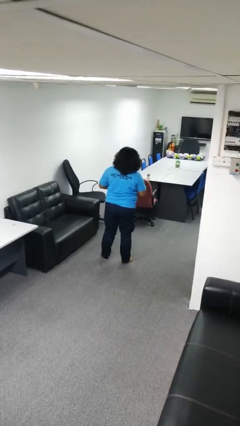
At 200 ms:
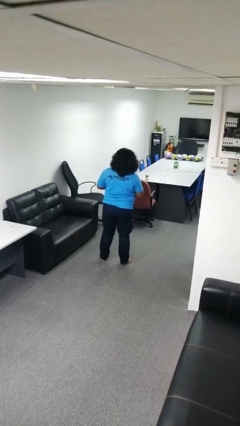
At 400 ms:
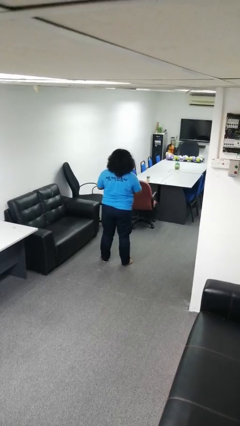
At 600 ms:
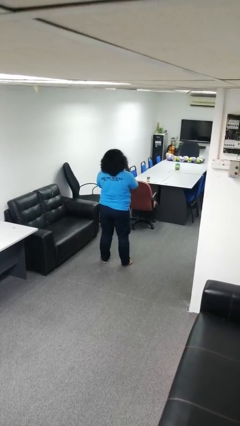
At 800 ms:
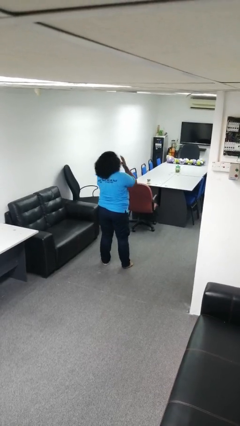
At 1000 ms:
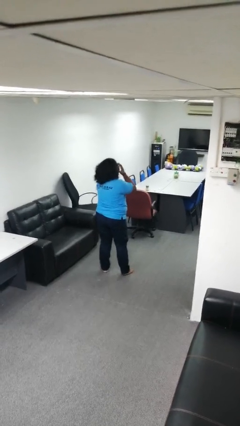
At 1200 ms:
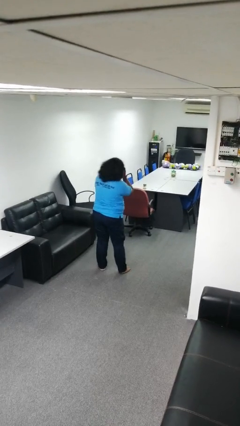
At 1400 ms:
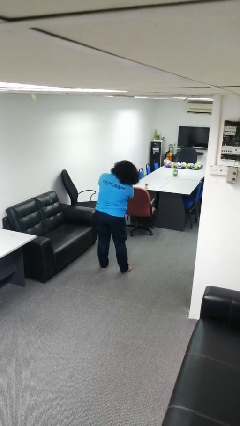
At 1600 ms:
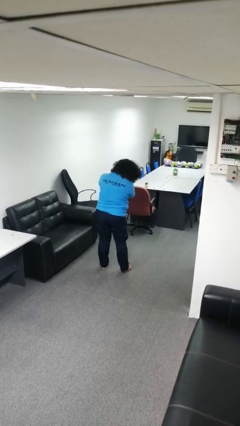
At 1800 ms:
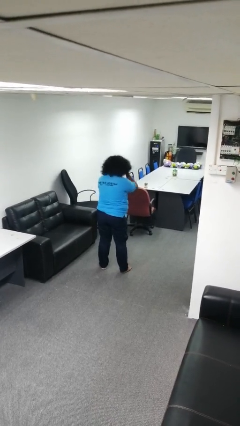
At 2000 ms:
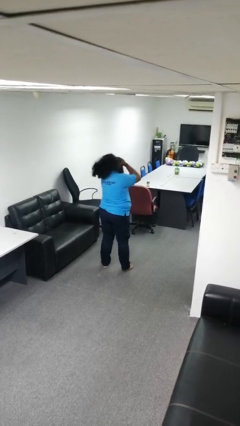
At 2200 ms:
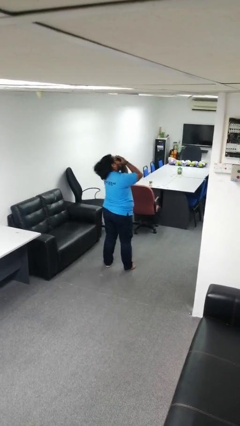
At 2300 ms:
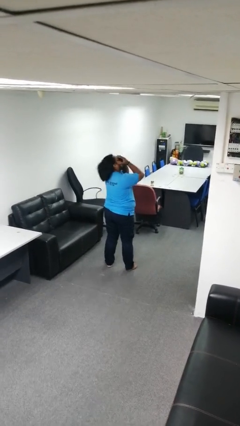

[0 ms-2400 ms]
person covers face with hands

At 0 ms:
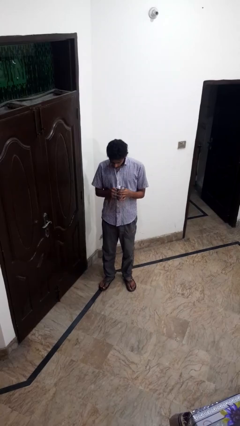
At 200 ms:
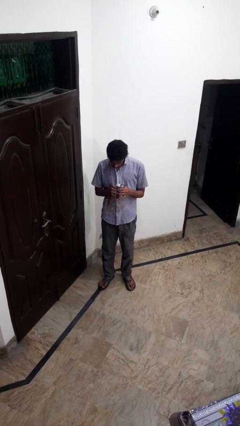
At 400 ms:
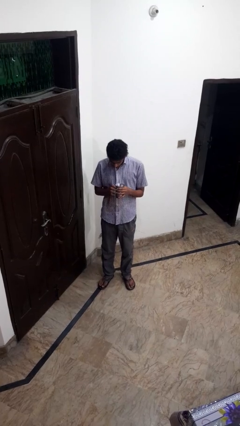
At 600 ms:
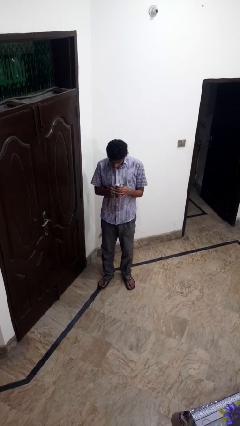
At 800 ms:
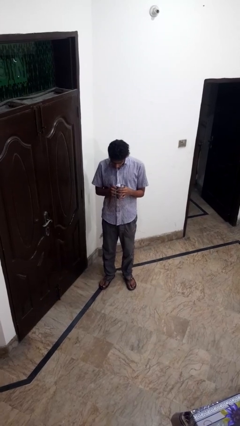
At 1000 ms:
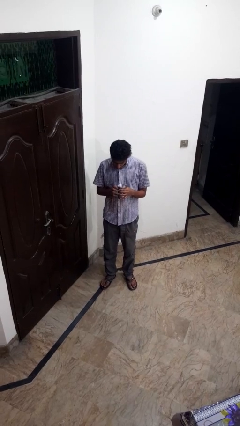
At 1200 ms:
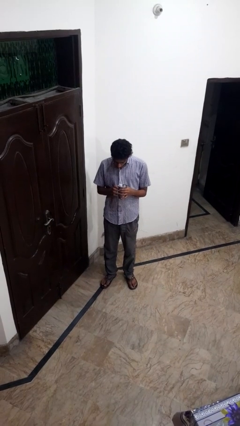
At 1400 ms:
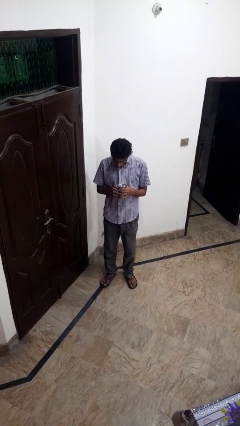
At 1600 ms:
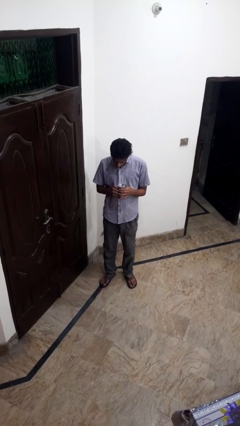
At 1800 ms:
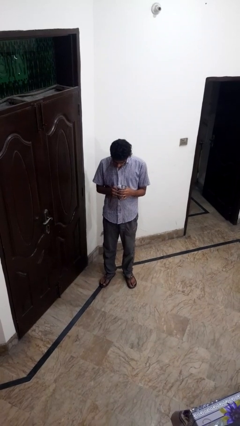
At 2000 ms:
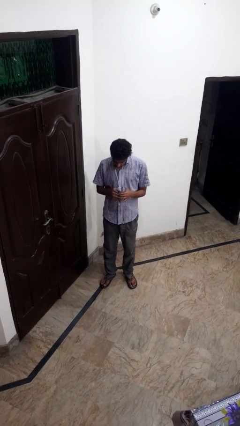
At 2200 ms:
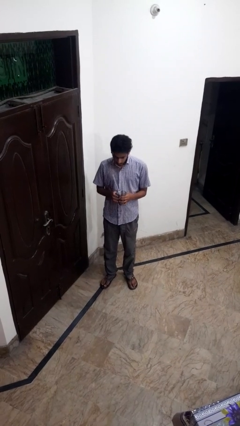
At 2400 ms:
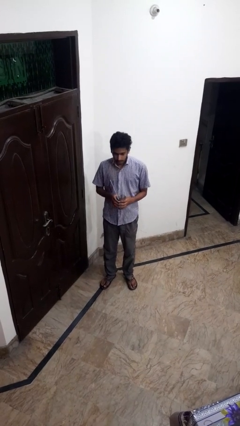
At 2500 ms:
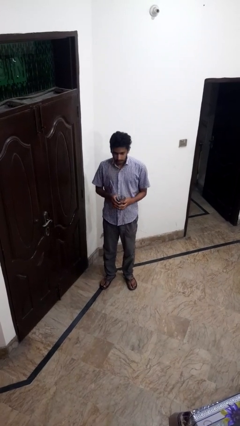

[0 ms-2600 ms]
person drinks from straw

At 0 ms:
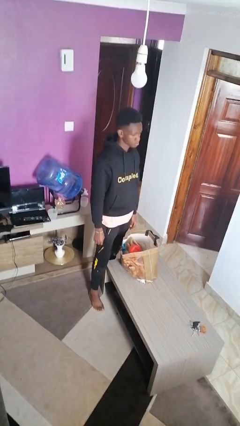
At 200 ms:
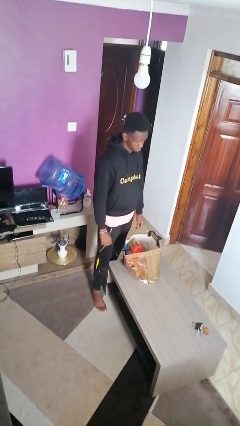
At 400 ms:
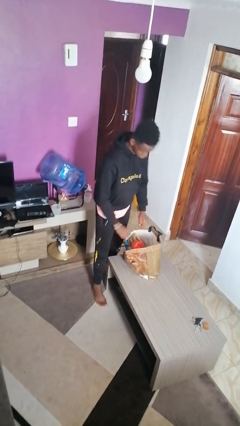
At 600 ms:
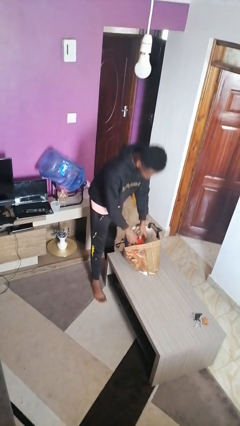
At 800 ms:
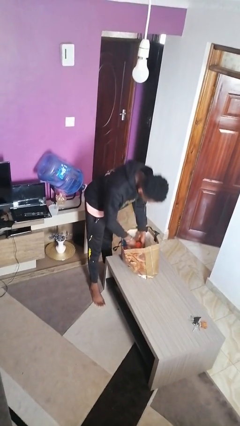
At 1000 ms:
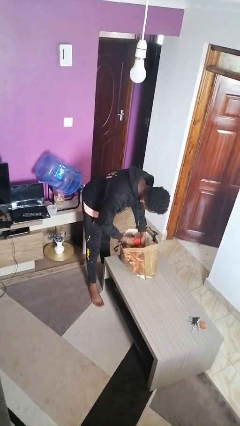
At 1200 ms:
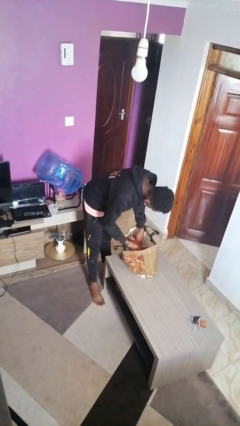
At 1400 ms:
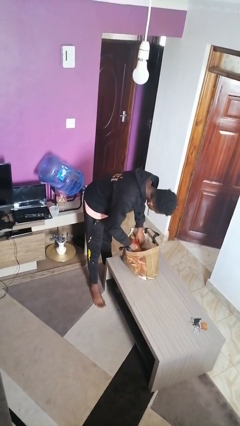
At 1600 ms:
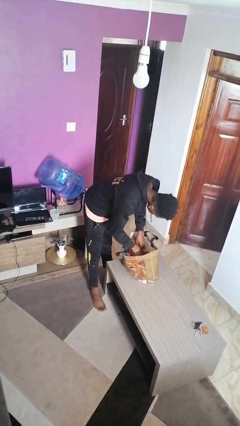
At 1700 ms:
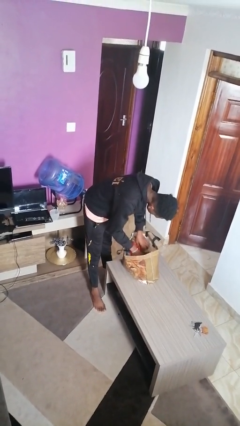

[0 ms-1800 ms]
person searches in bag

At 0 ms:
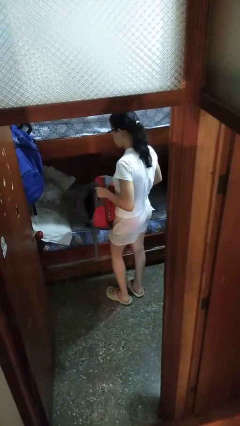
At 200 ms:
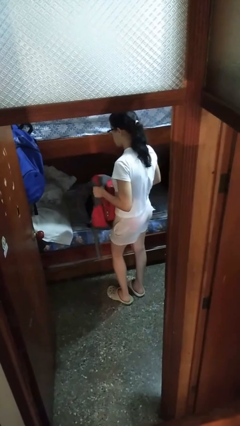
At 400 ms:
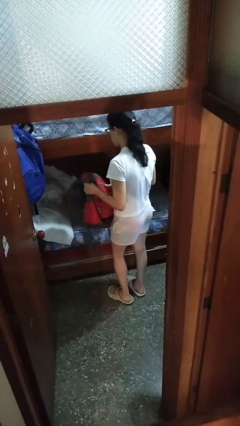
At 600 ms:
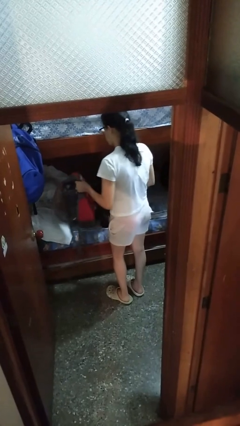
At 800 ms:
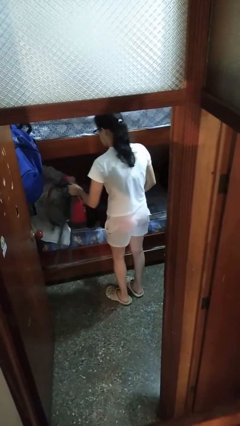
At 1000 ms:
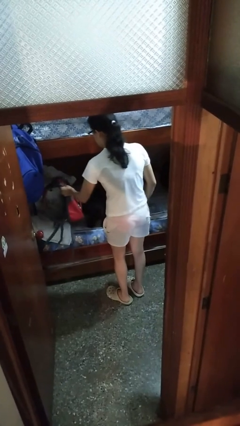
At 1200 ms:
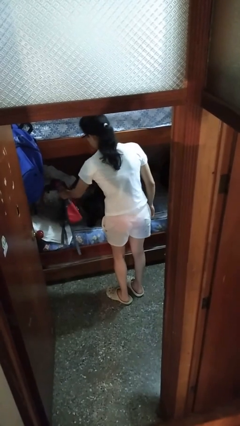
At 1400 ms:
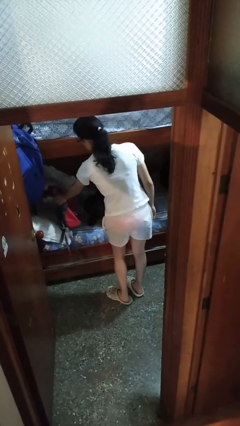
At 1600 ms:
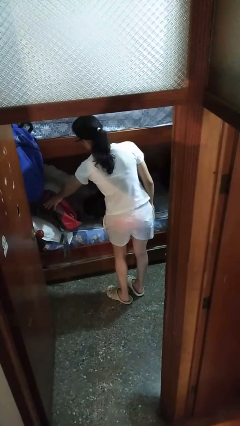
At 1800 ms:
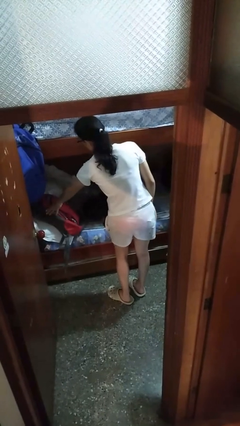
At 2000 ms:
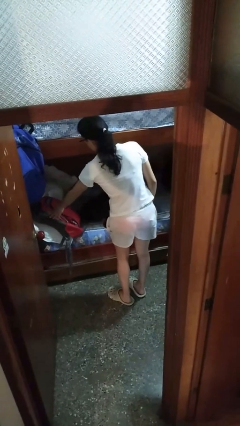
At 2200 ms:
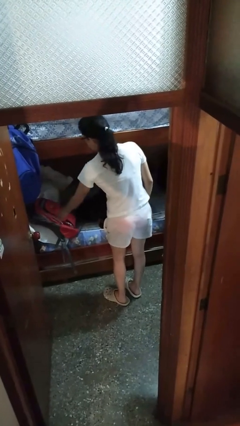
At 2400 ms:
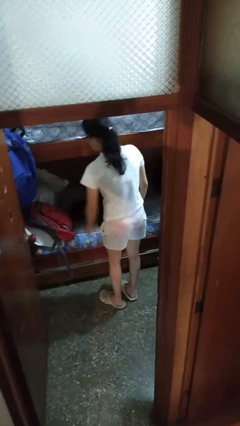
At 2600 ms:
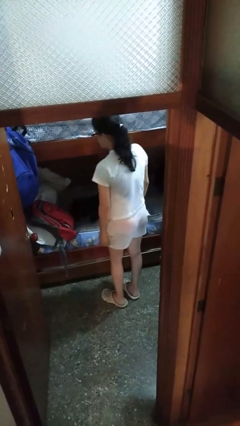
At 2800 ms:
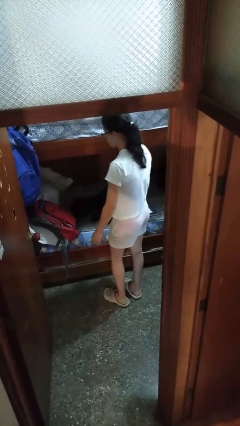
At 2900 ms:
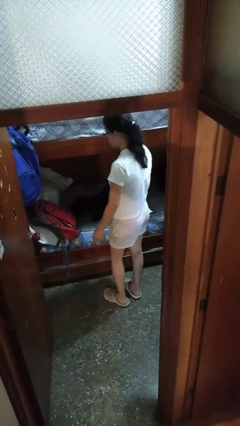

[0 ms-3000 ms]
person puts down object on bed

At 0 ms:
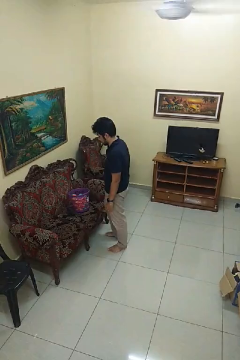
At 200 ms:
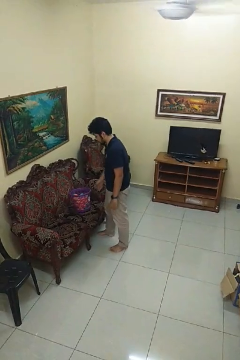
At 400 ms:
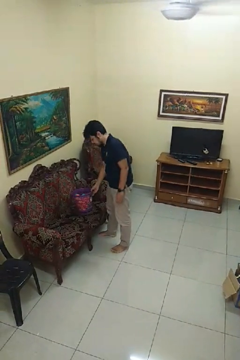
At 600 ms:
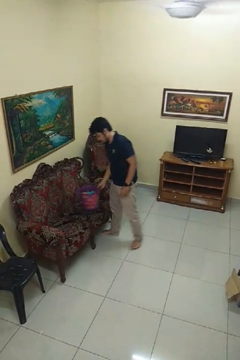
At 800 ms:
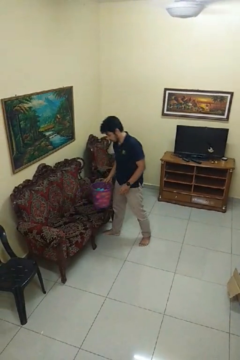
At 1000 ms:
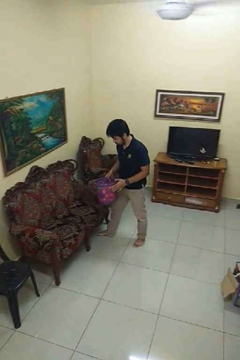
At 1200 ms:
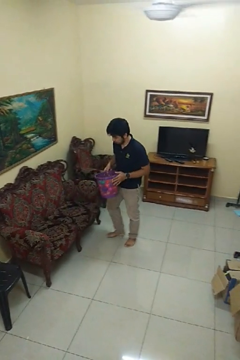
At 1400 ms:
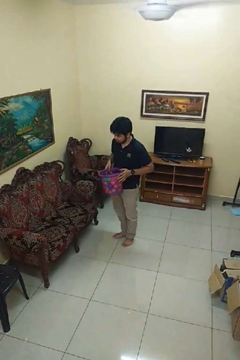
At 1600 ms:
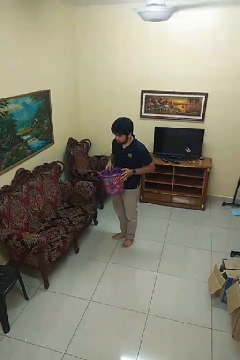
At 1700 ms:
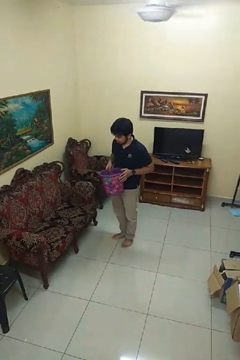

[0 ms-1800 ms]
person picks up object from couch

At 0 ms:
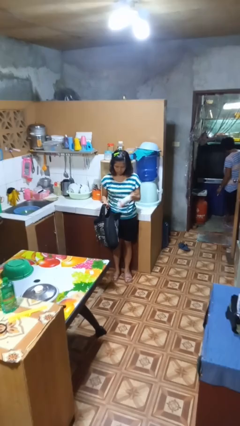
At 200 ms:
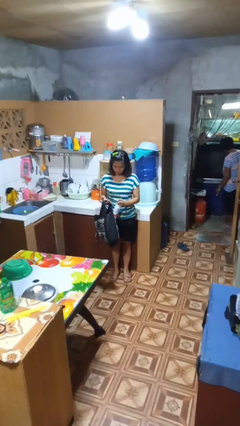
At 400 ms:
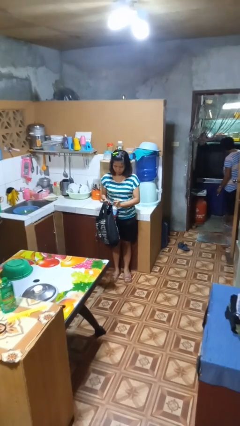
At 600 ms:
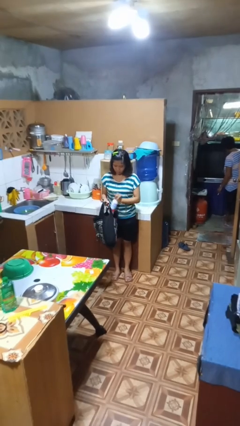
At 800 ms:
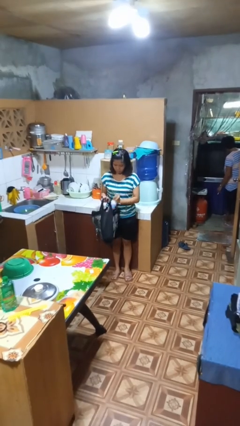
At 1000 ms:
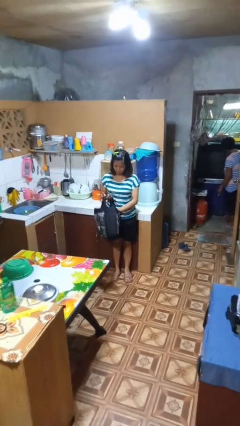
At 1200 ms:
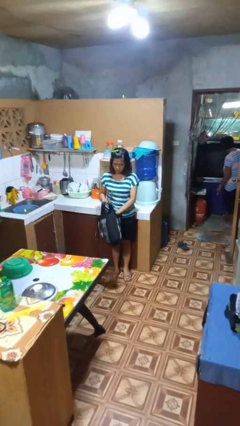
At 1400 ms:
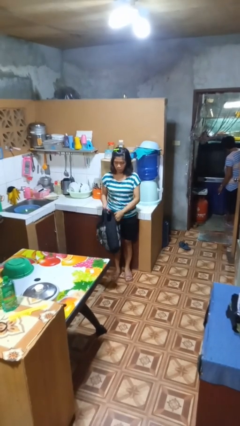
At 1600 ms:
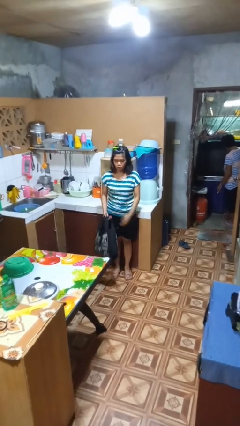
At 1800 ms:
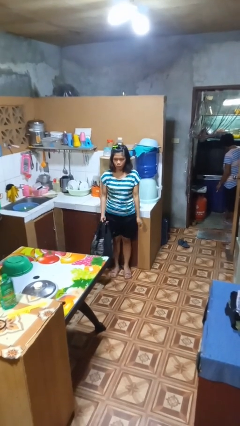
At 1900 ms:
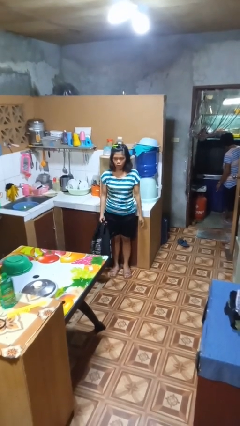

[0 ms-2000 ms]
person puts object into bag

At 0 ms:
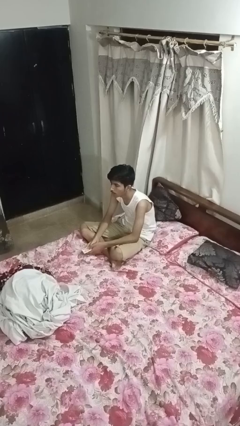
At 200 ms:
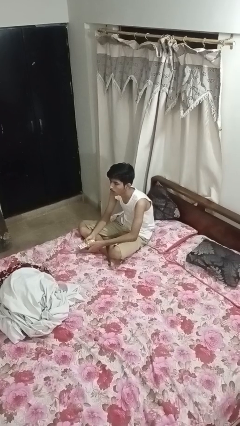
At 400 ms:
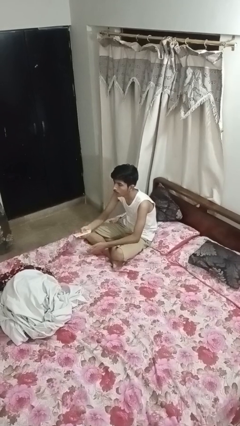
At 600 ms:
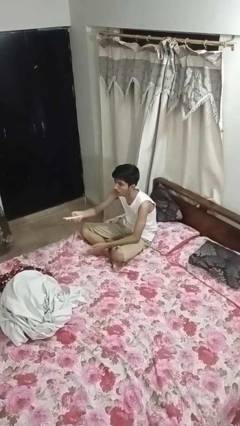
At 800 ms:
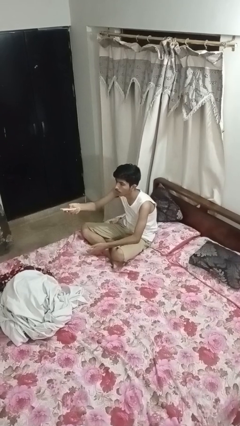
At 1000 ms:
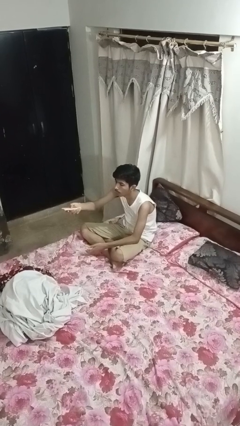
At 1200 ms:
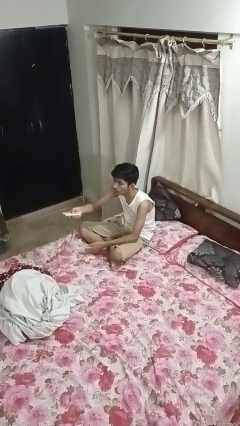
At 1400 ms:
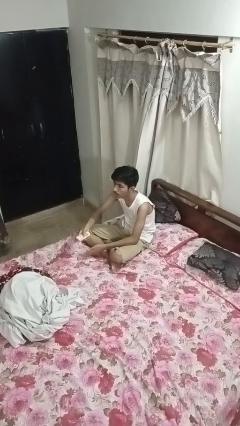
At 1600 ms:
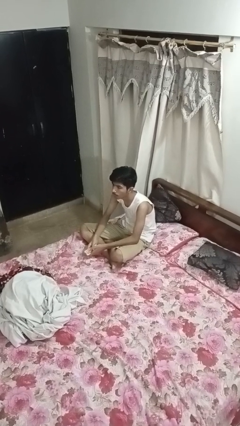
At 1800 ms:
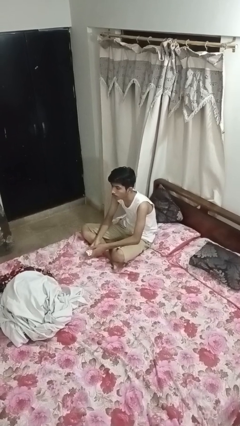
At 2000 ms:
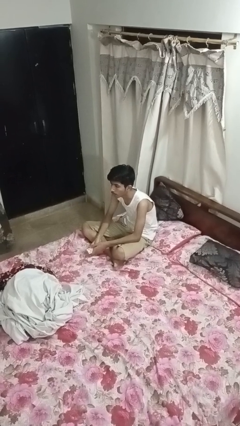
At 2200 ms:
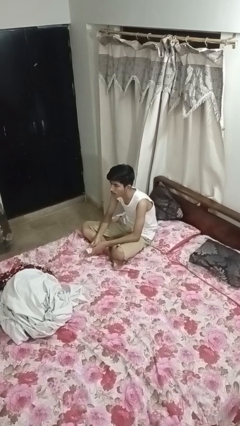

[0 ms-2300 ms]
person uses television remote

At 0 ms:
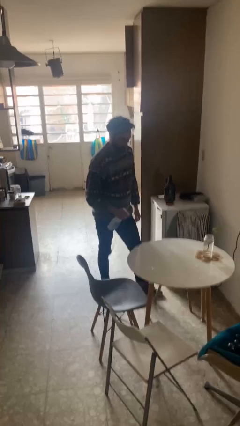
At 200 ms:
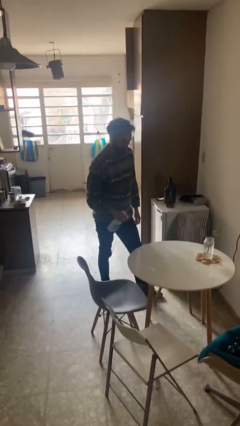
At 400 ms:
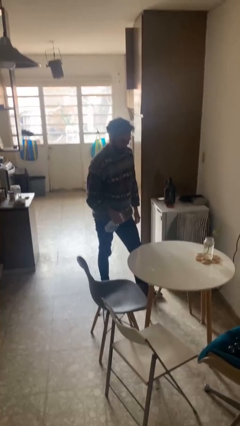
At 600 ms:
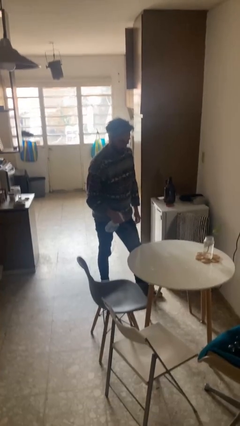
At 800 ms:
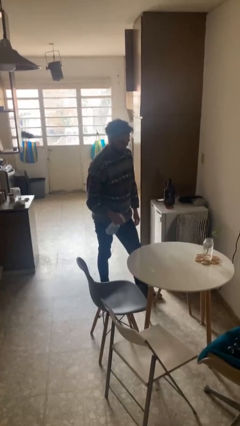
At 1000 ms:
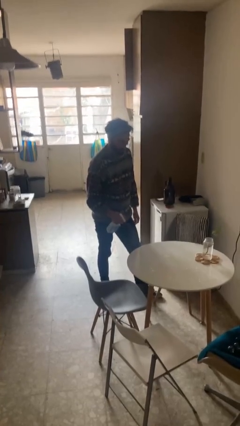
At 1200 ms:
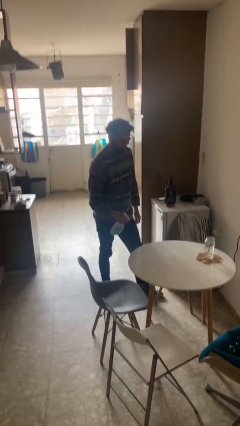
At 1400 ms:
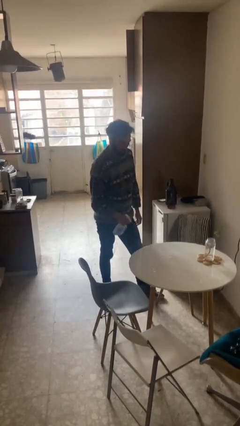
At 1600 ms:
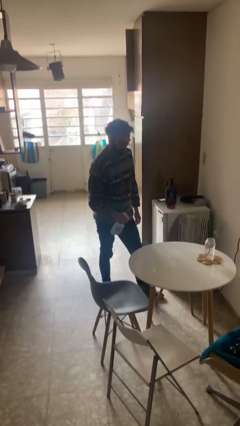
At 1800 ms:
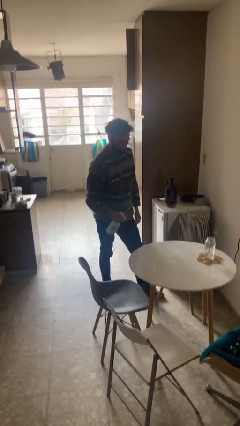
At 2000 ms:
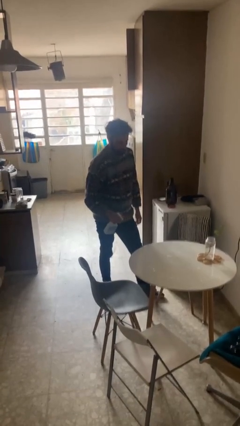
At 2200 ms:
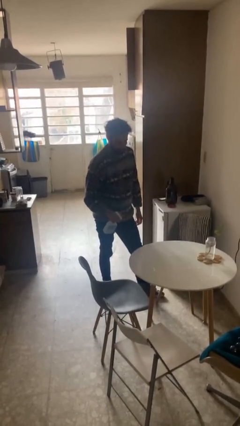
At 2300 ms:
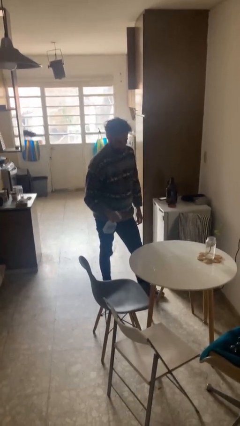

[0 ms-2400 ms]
person sprays from bottle
